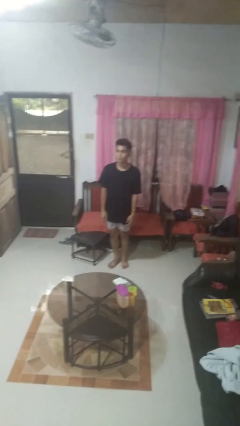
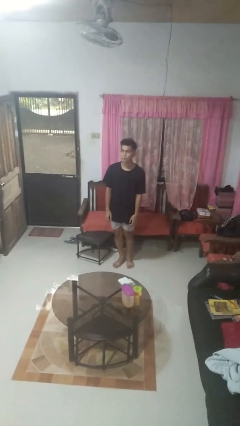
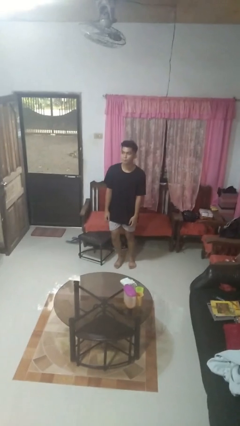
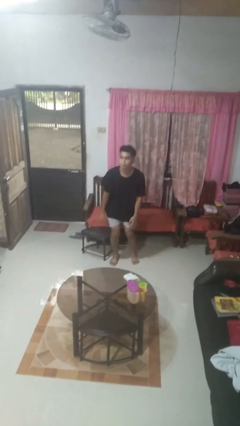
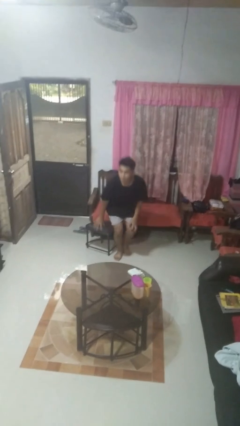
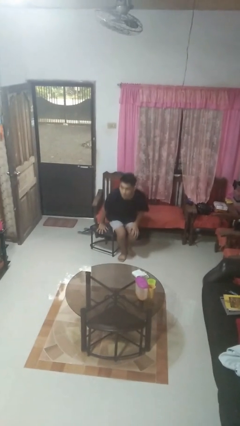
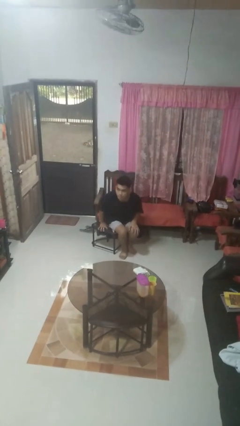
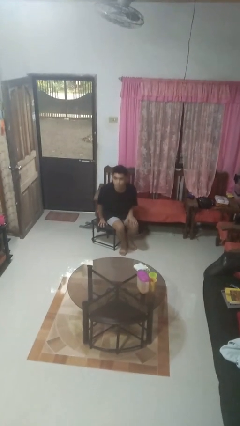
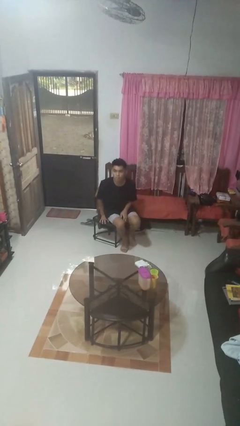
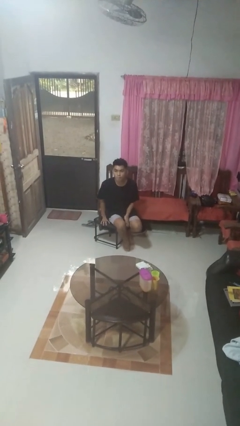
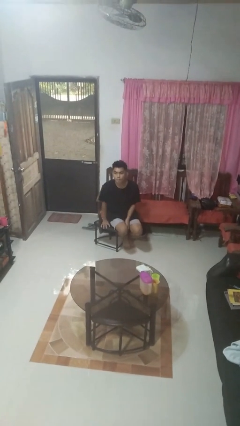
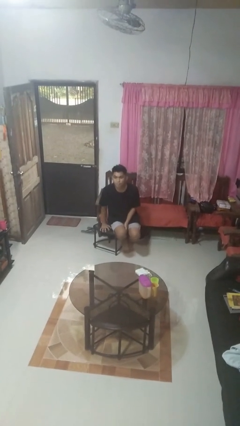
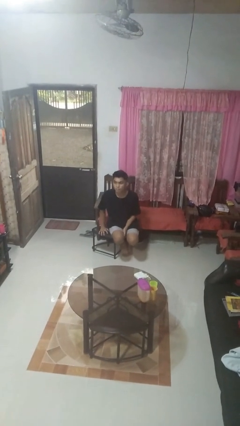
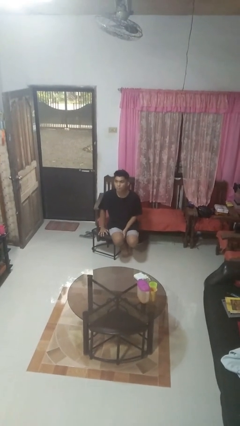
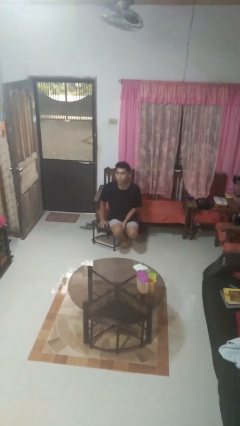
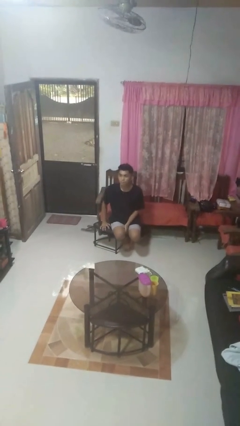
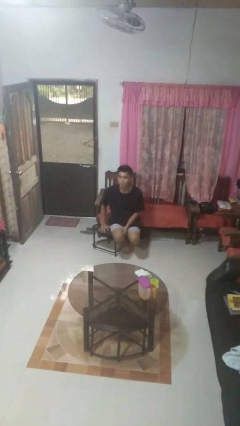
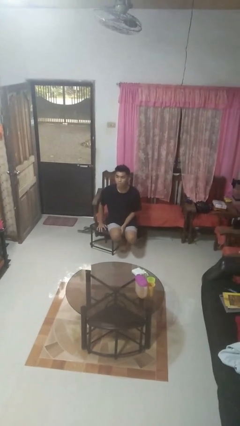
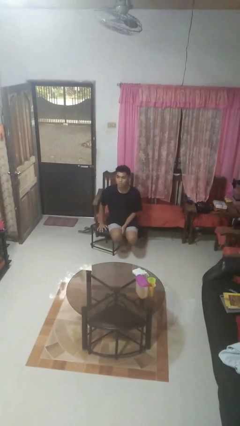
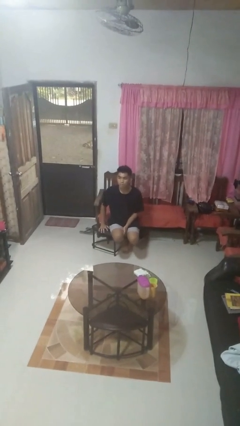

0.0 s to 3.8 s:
person sits down

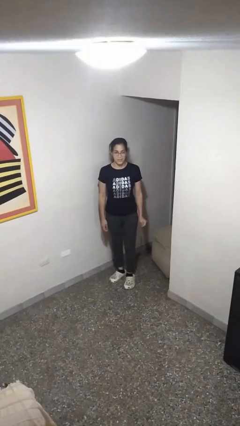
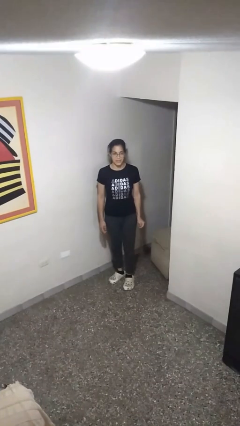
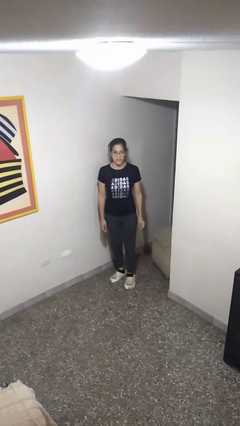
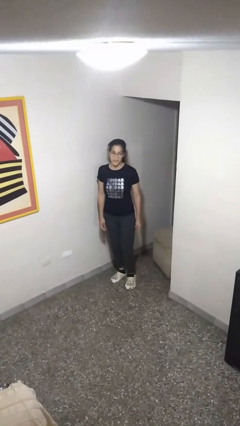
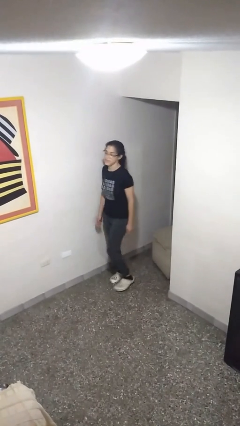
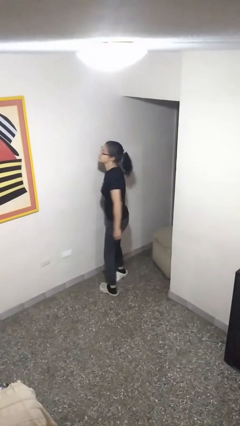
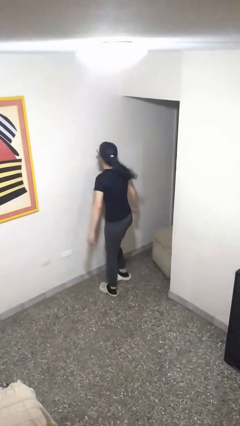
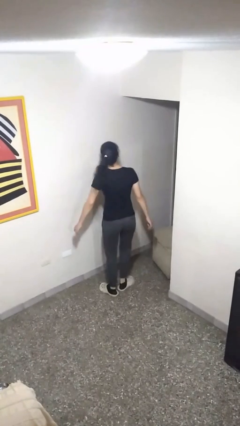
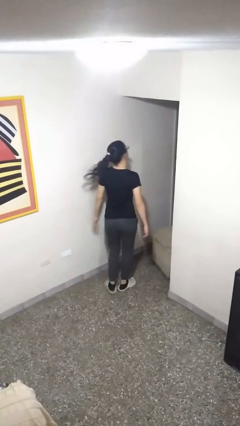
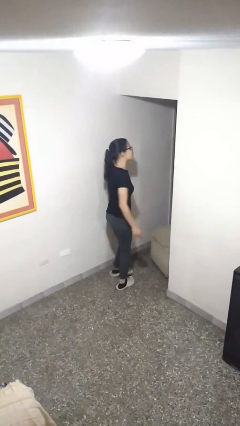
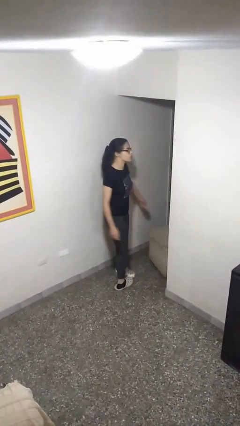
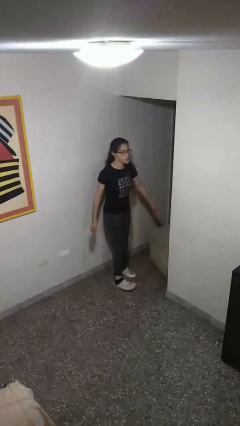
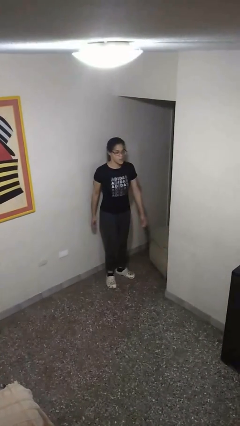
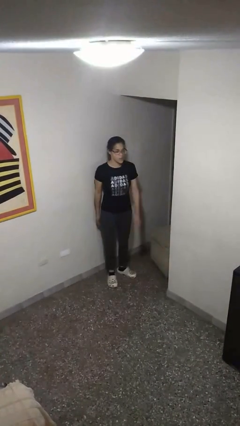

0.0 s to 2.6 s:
person twirls

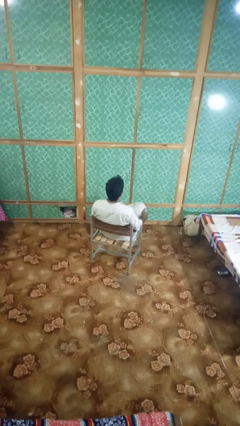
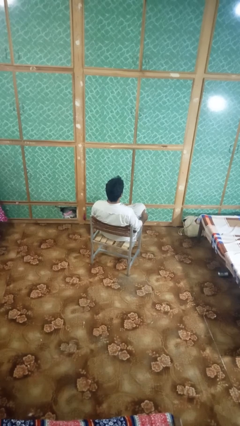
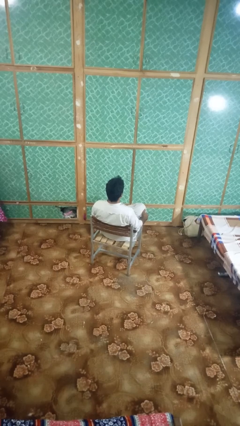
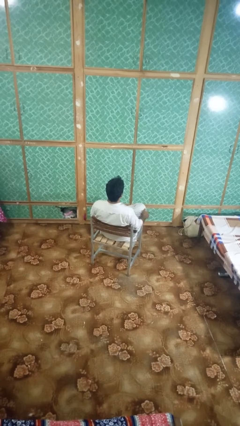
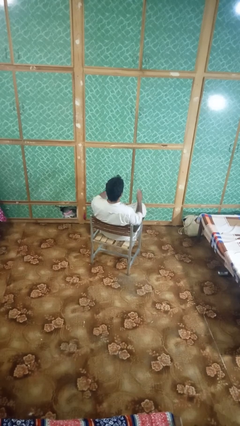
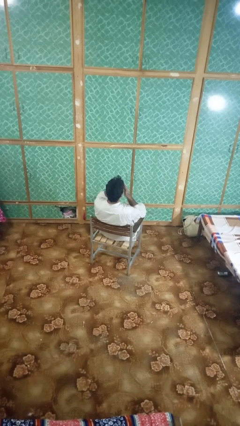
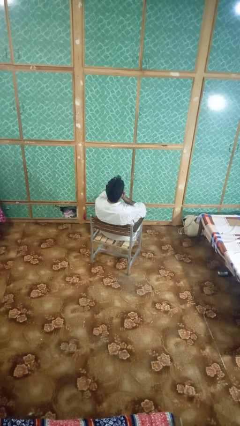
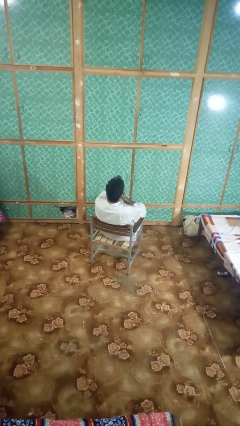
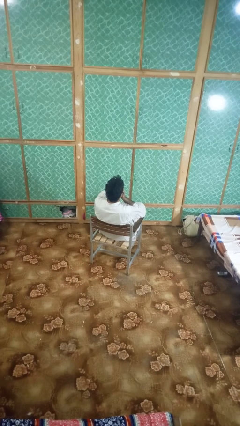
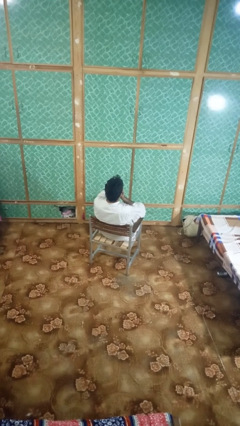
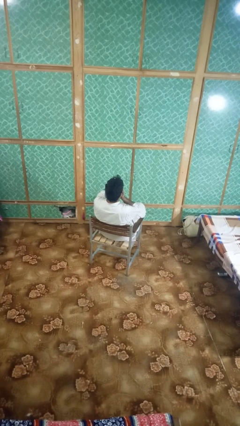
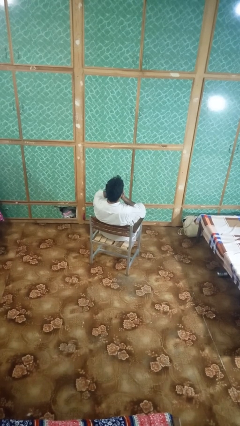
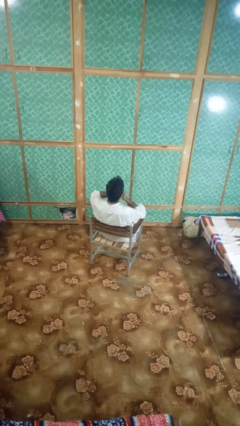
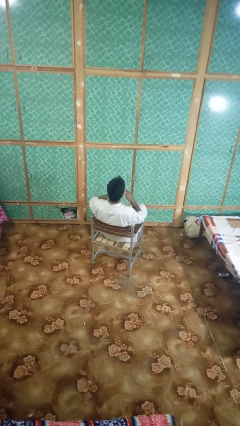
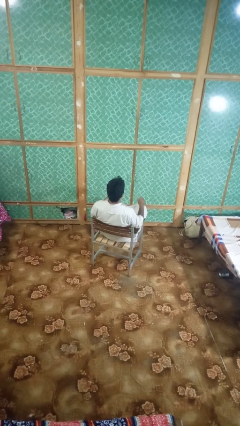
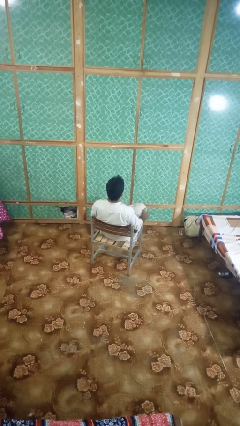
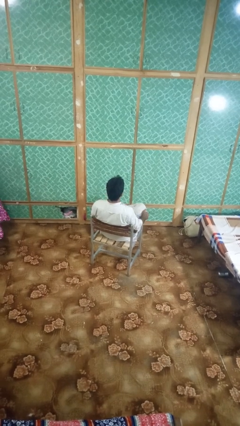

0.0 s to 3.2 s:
person sneezes into hand

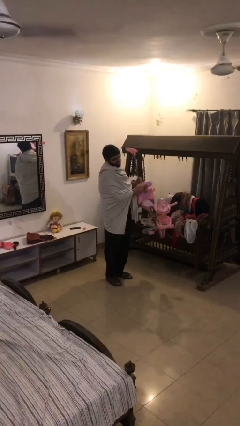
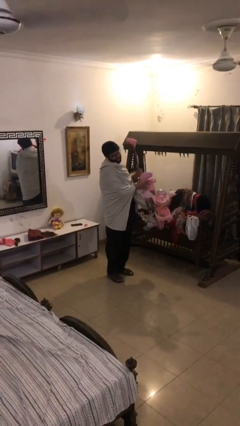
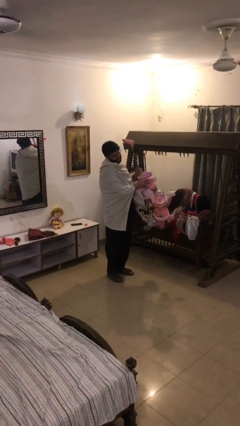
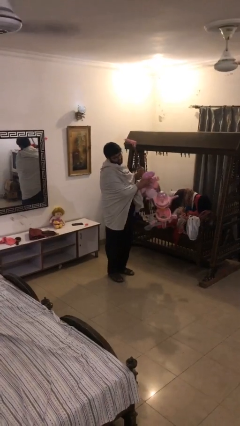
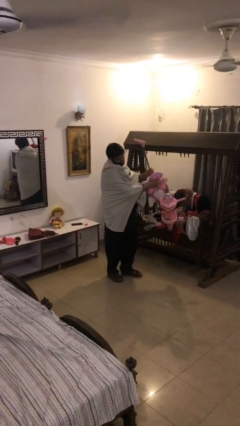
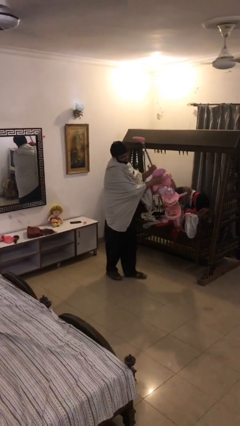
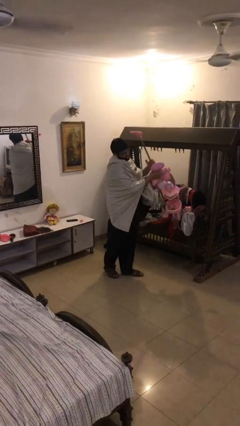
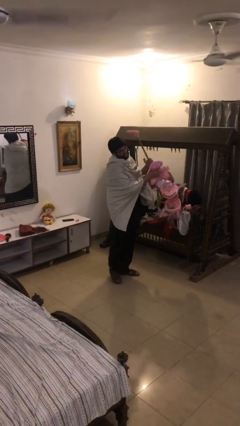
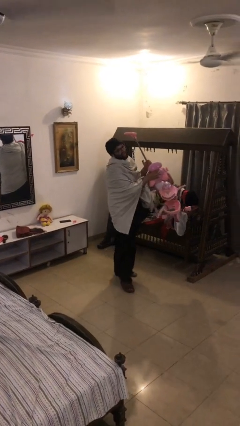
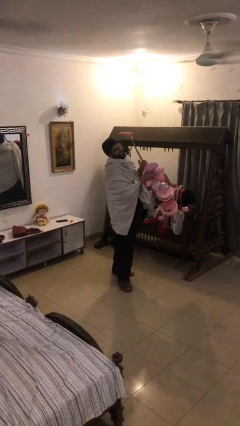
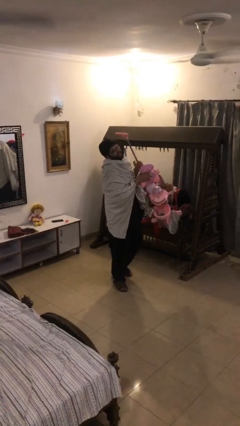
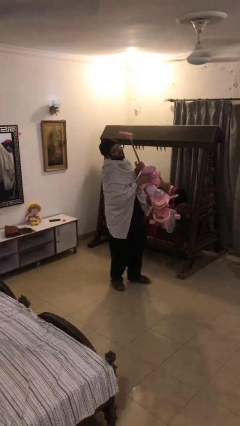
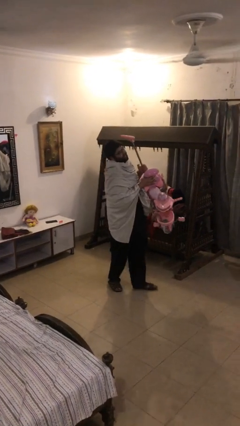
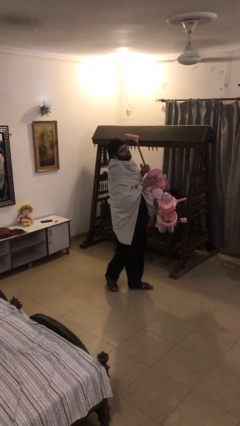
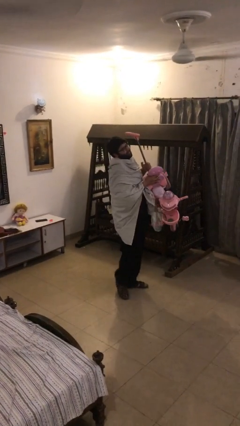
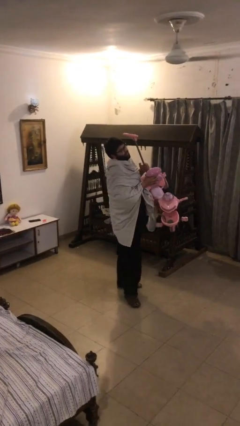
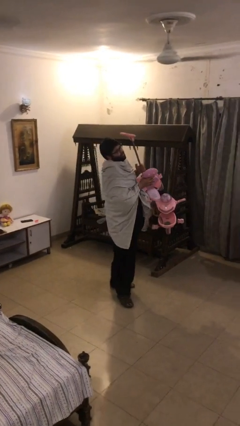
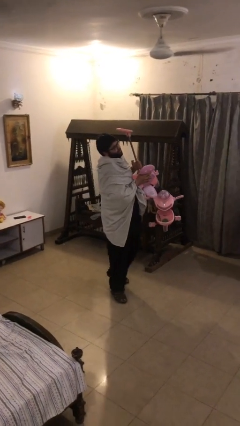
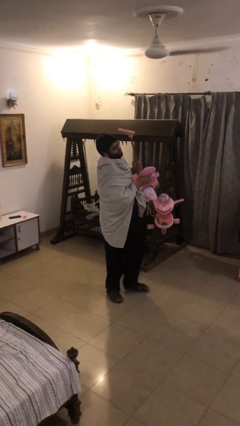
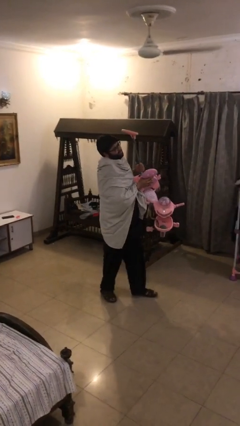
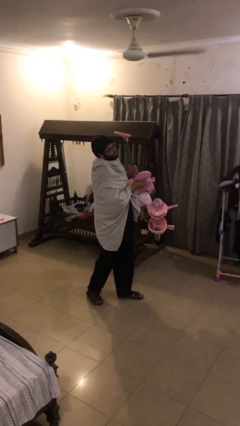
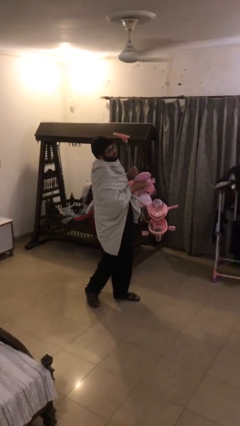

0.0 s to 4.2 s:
person carries heavy object

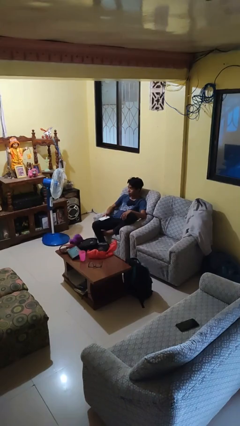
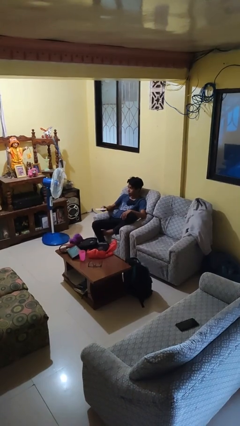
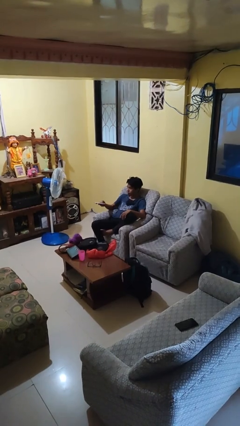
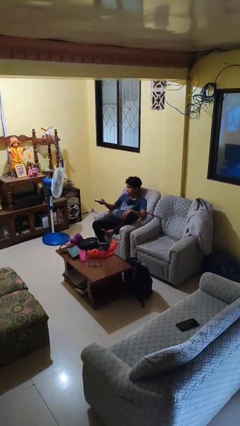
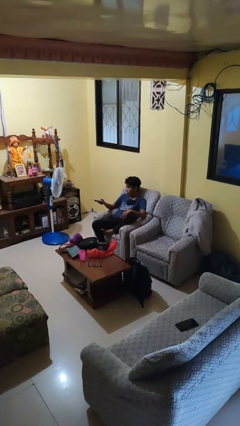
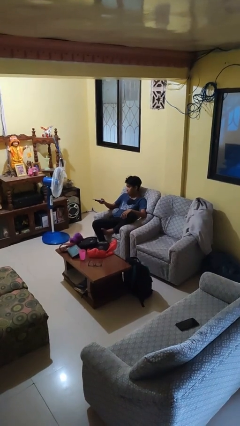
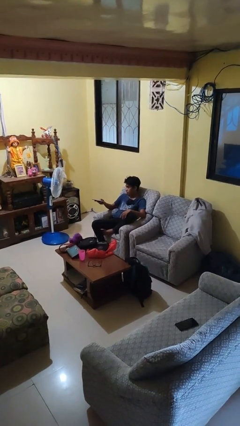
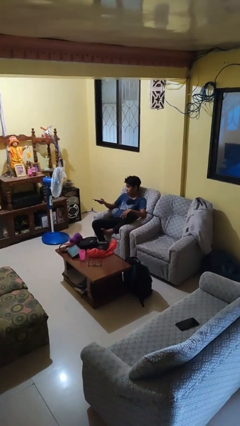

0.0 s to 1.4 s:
person uses television remote

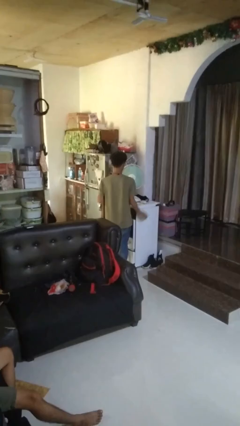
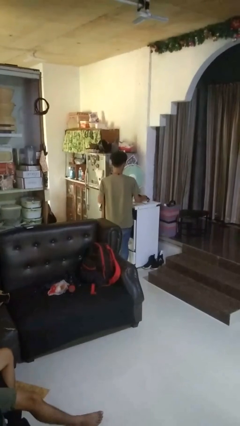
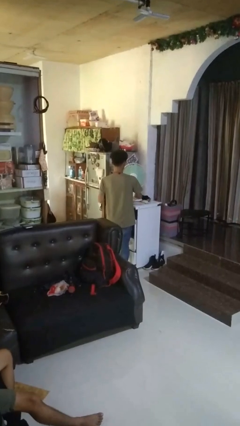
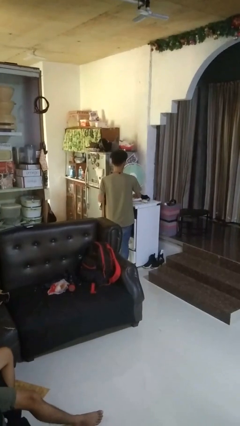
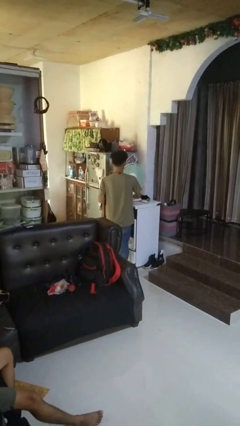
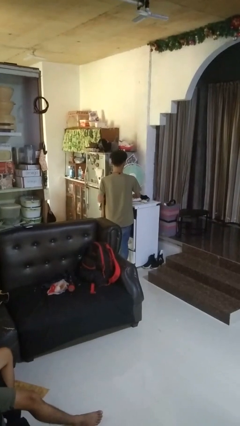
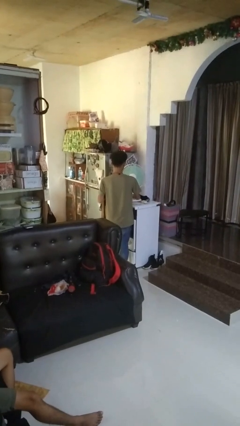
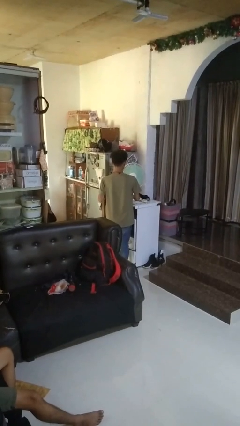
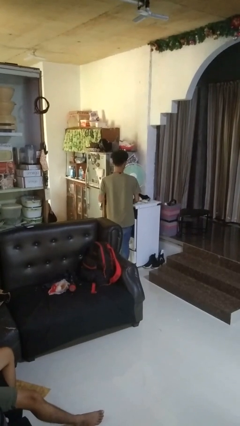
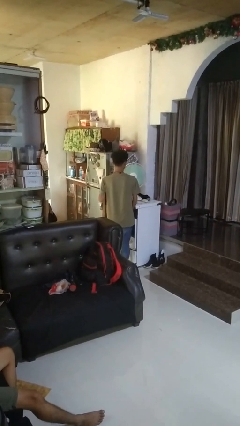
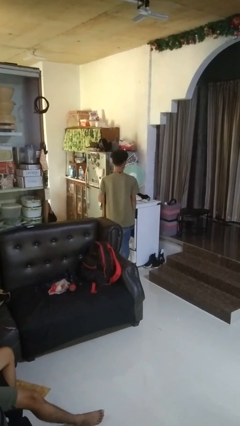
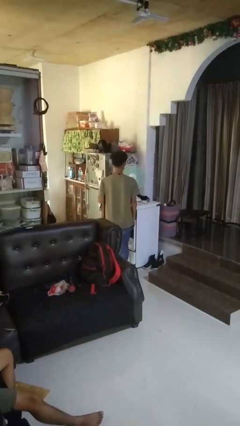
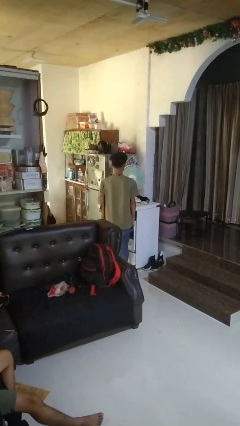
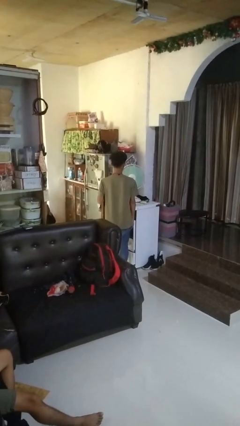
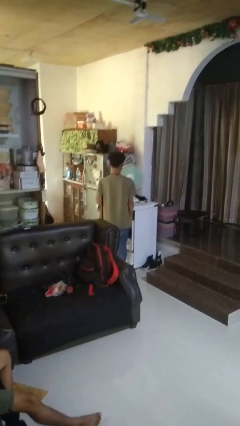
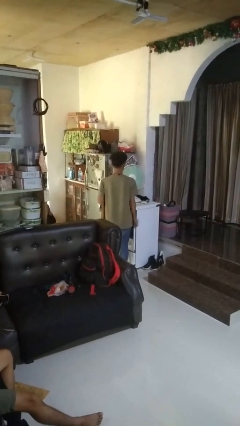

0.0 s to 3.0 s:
person turns on fan
